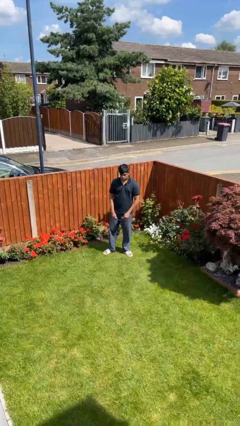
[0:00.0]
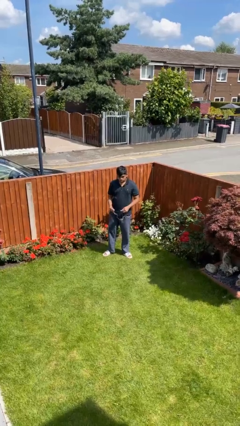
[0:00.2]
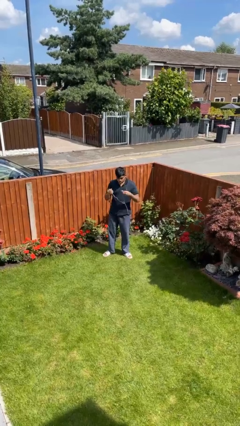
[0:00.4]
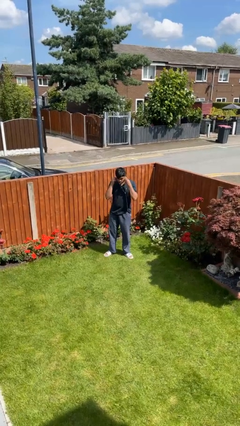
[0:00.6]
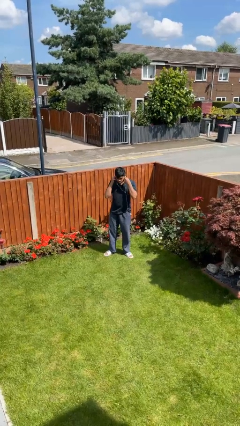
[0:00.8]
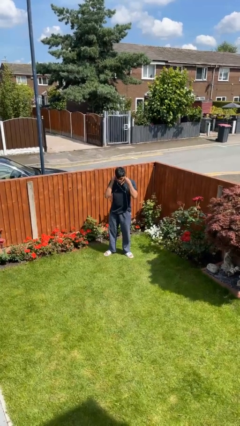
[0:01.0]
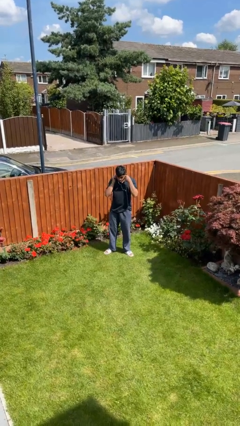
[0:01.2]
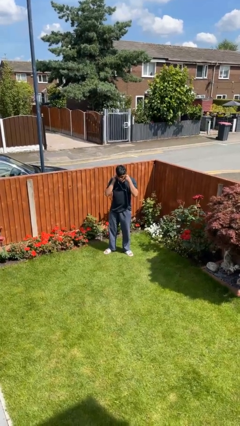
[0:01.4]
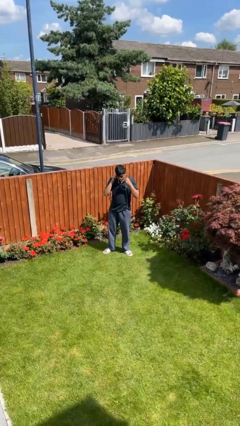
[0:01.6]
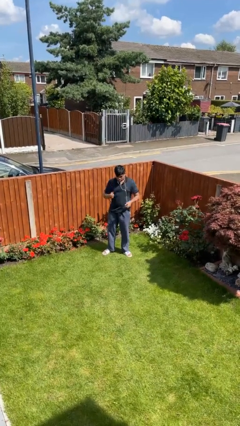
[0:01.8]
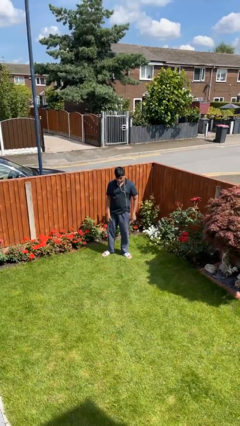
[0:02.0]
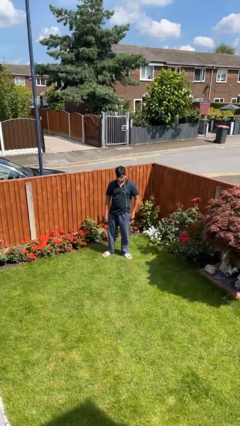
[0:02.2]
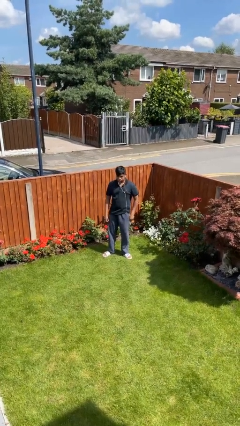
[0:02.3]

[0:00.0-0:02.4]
person puts on headphones

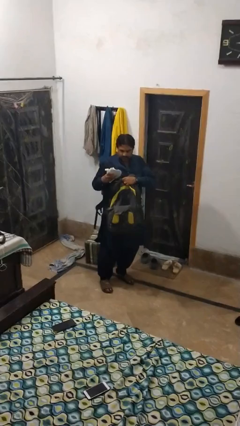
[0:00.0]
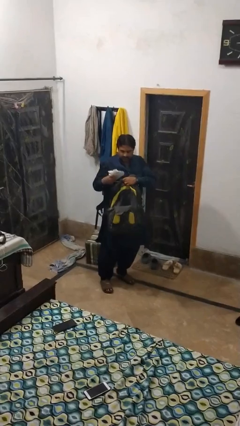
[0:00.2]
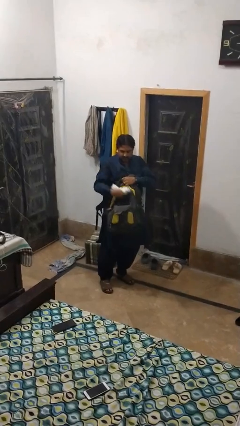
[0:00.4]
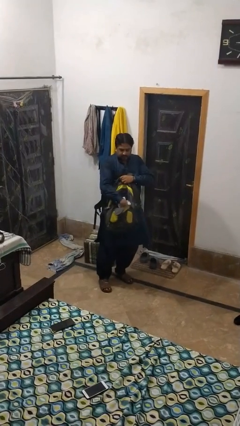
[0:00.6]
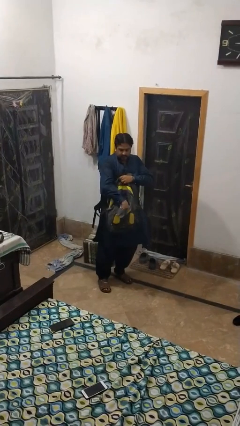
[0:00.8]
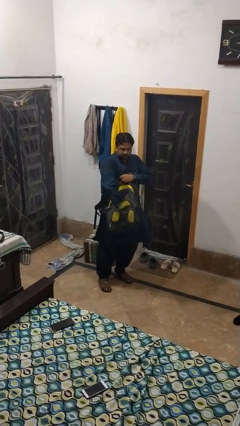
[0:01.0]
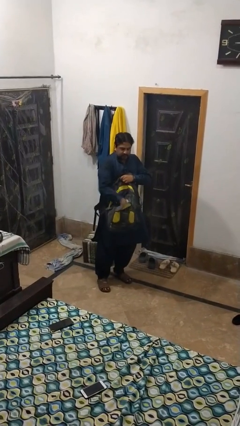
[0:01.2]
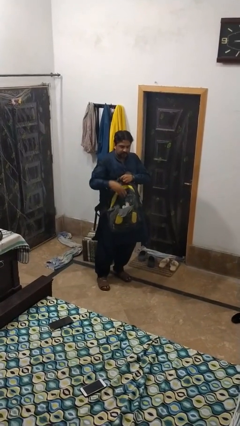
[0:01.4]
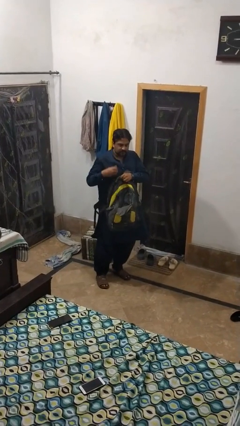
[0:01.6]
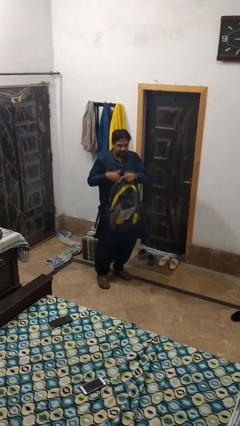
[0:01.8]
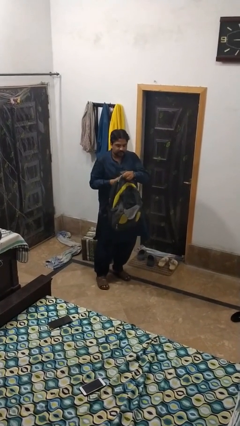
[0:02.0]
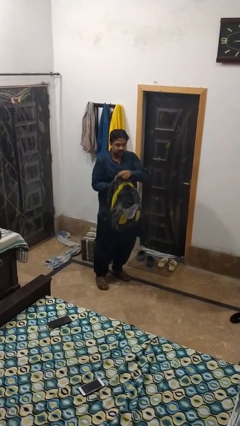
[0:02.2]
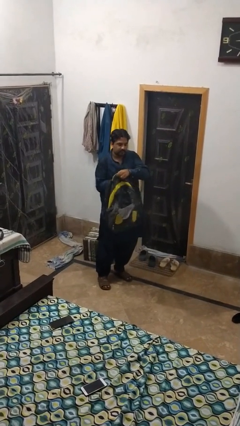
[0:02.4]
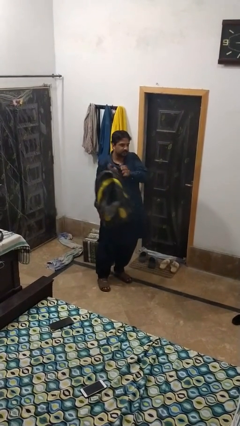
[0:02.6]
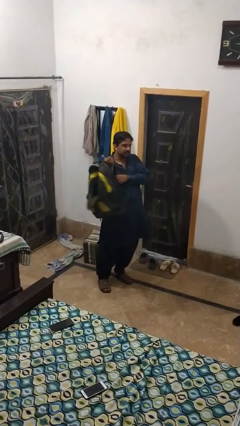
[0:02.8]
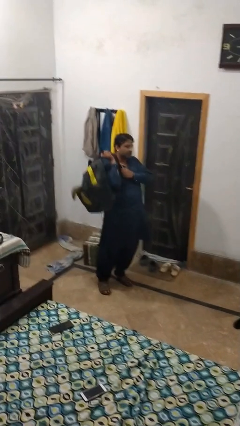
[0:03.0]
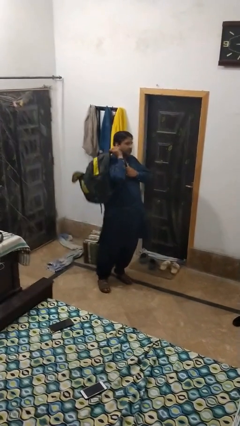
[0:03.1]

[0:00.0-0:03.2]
person puts object into backpack

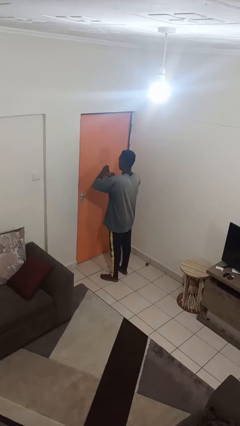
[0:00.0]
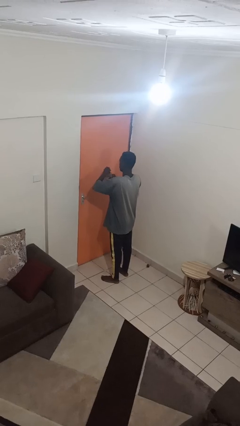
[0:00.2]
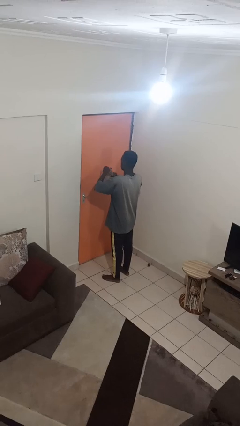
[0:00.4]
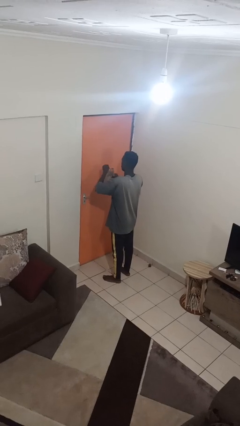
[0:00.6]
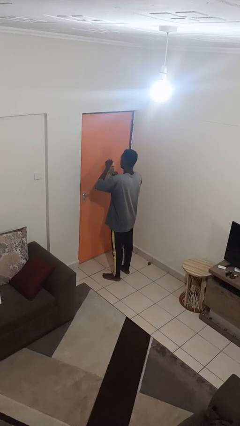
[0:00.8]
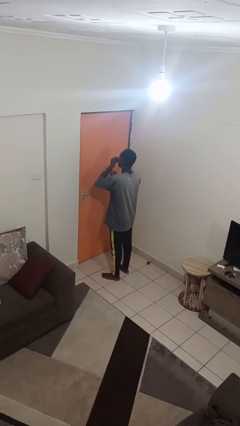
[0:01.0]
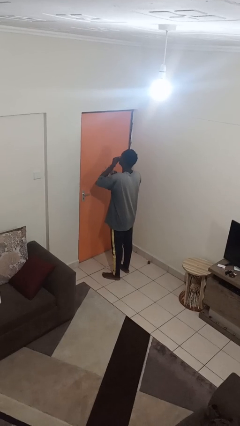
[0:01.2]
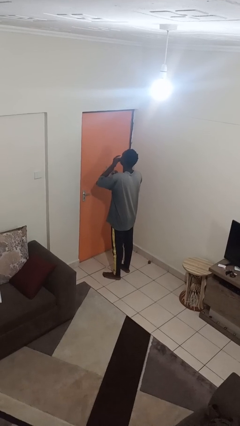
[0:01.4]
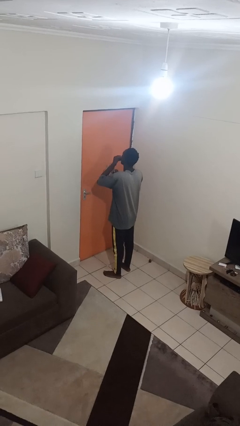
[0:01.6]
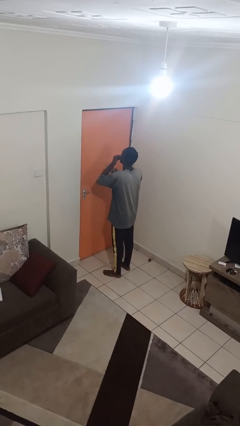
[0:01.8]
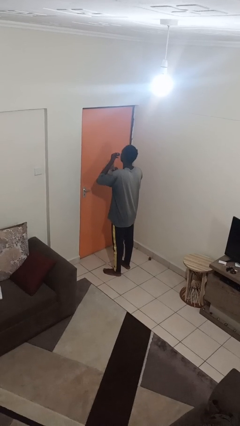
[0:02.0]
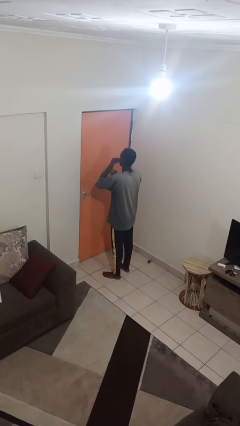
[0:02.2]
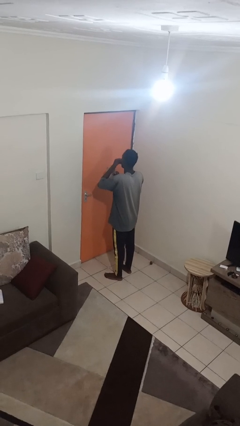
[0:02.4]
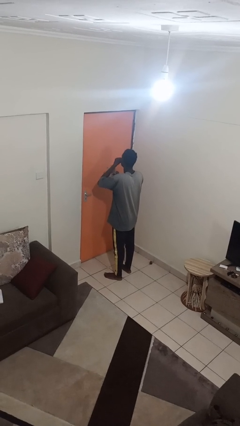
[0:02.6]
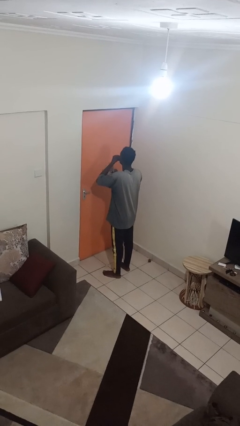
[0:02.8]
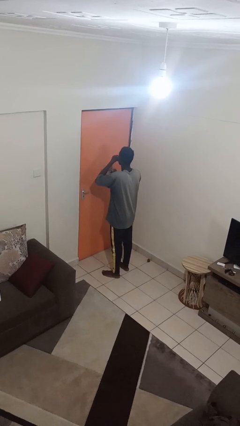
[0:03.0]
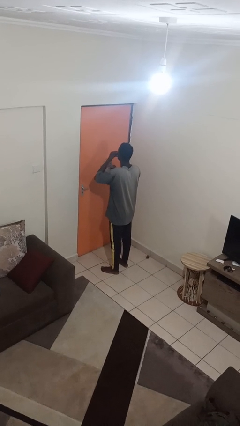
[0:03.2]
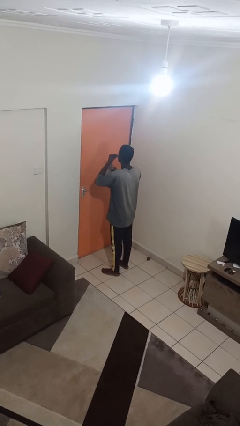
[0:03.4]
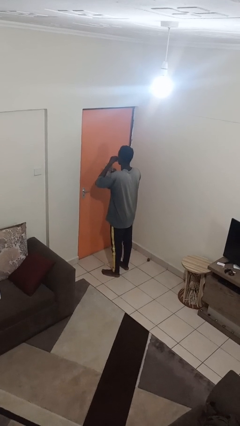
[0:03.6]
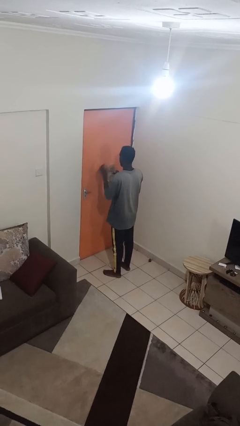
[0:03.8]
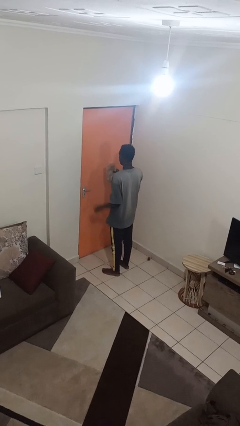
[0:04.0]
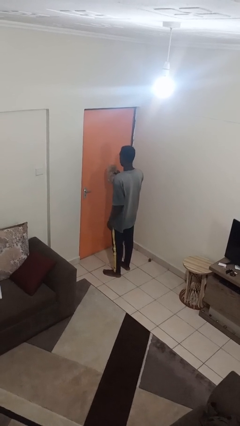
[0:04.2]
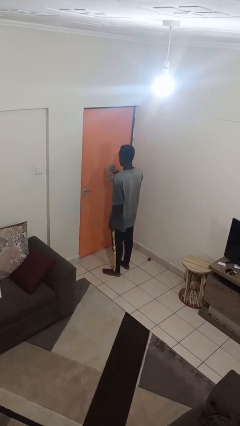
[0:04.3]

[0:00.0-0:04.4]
person eats snack from bag

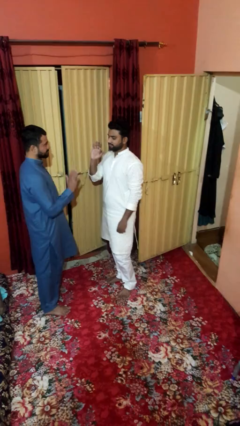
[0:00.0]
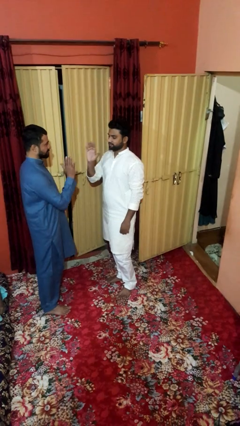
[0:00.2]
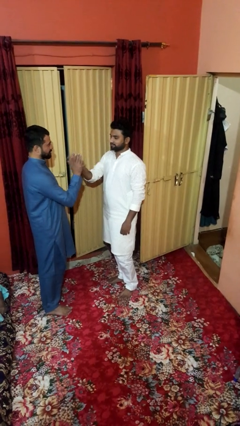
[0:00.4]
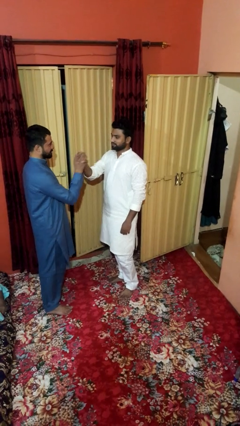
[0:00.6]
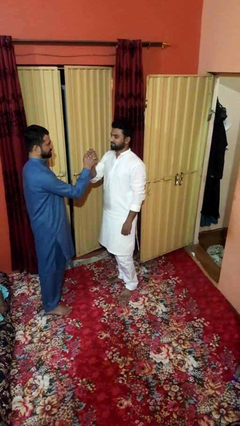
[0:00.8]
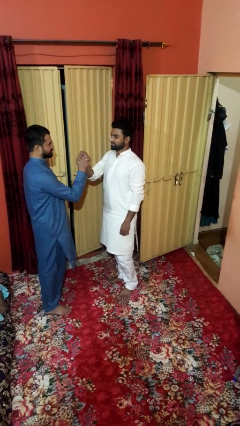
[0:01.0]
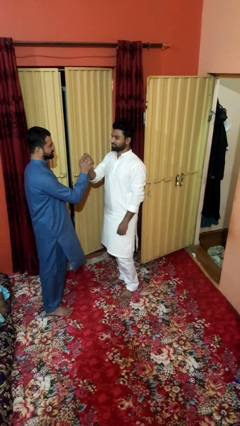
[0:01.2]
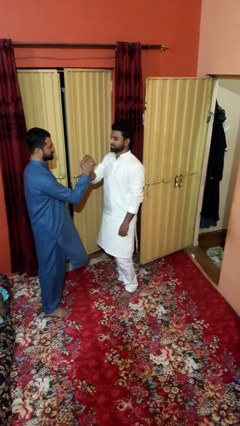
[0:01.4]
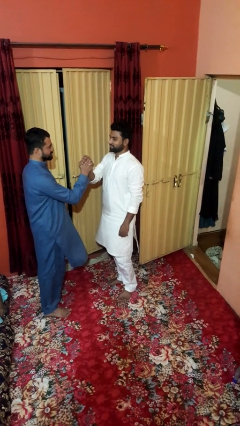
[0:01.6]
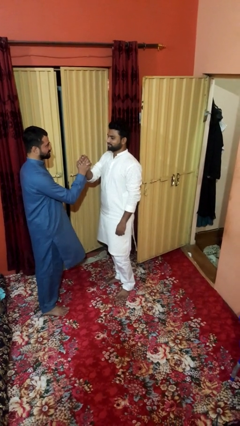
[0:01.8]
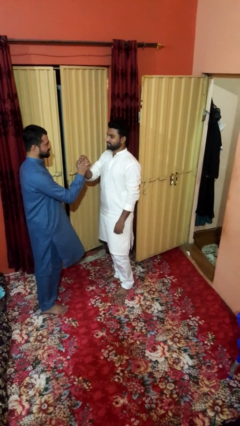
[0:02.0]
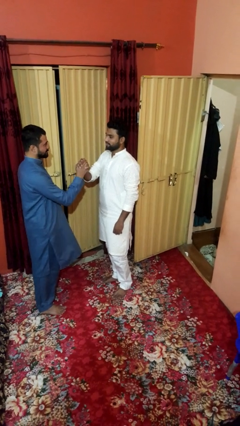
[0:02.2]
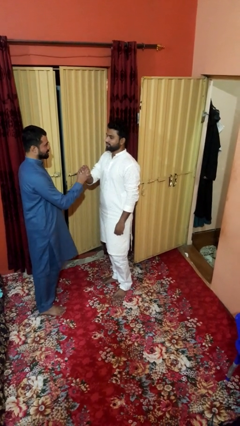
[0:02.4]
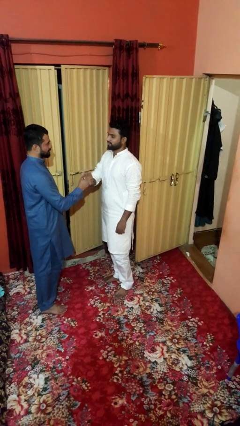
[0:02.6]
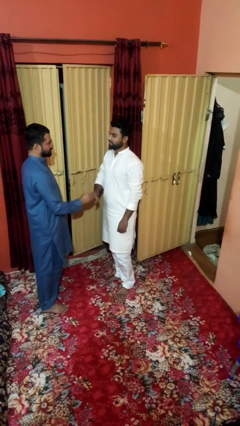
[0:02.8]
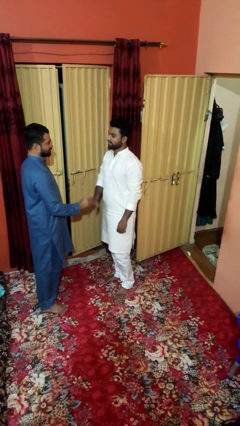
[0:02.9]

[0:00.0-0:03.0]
person highfives hand

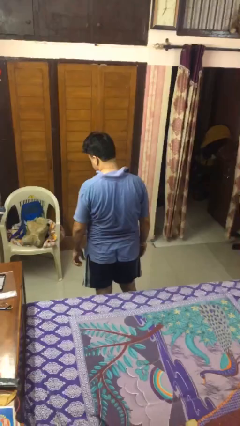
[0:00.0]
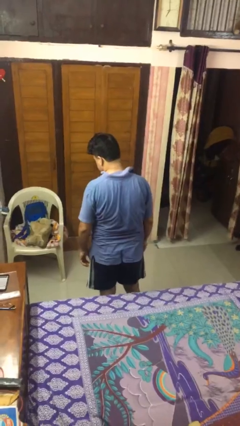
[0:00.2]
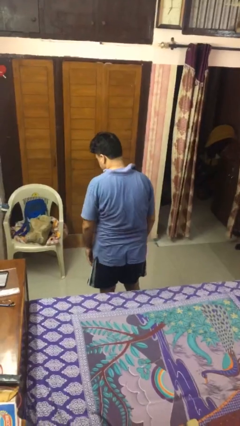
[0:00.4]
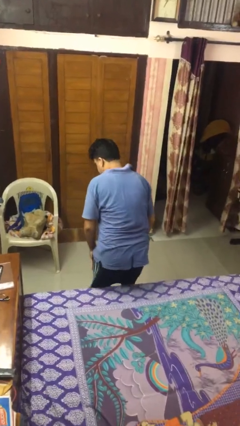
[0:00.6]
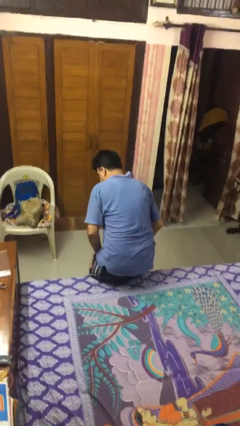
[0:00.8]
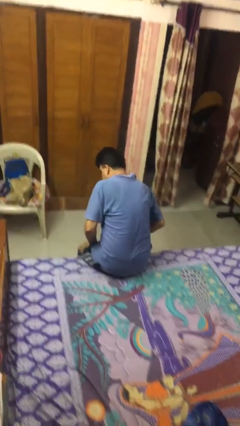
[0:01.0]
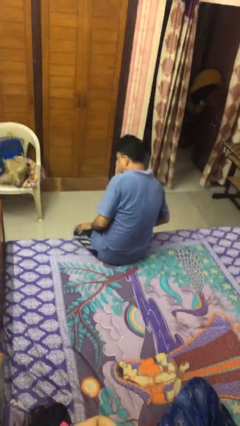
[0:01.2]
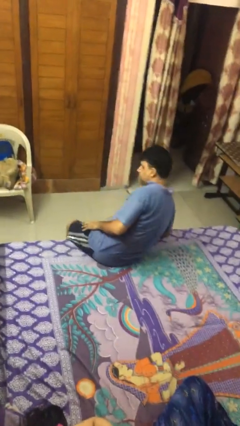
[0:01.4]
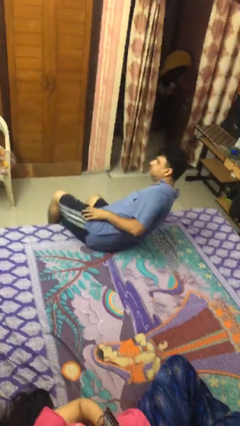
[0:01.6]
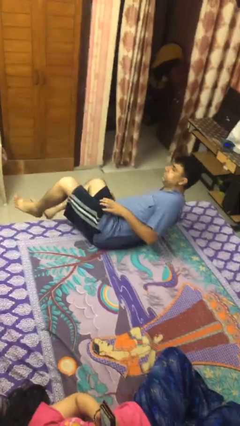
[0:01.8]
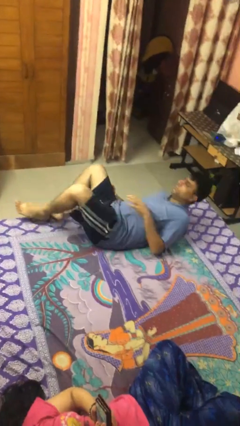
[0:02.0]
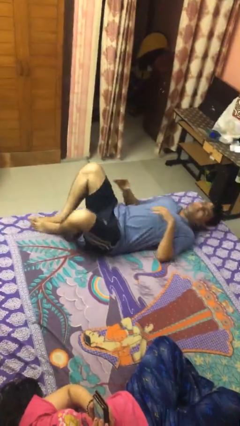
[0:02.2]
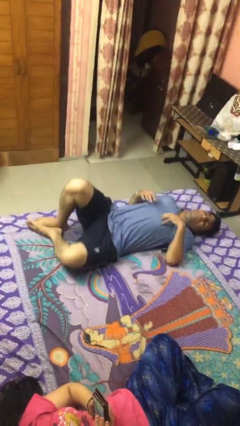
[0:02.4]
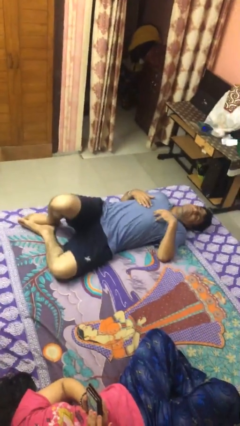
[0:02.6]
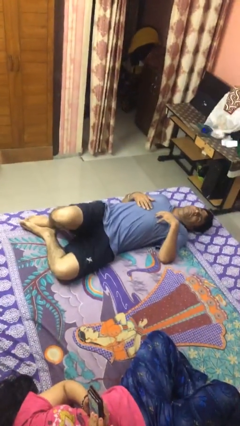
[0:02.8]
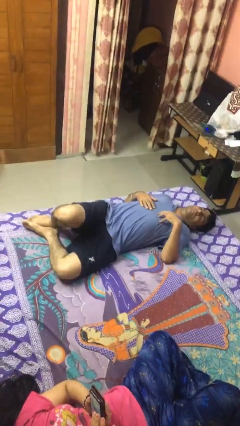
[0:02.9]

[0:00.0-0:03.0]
person lies down on bed

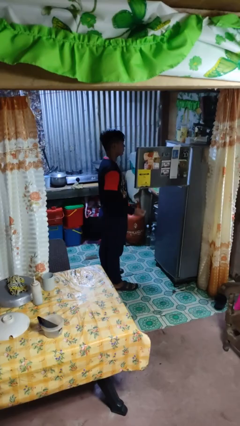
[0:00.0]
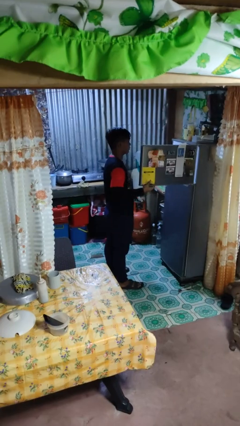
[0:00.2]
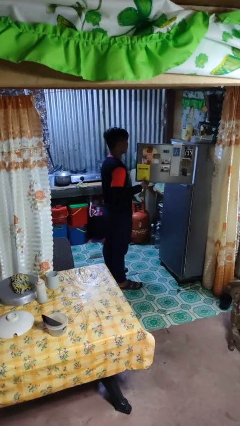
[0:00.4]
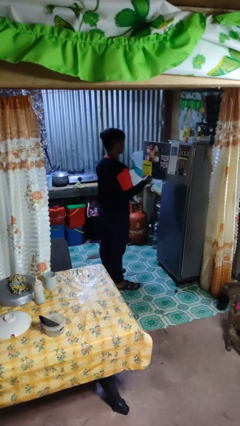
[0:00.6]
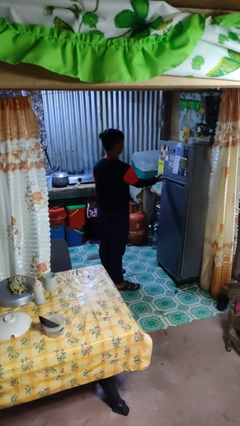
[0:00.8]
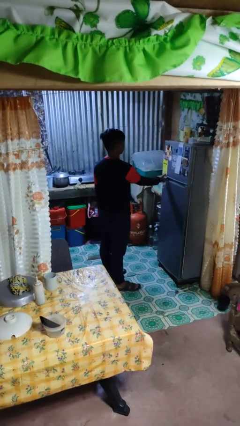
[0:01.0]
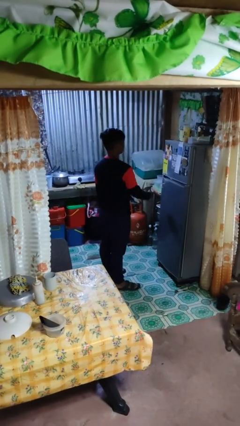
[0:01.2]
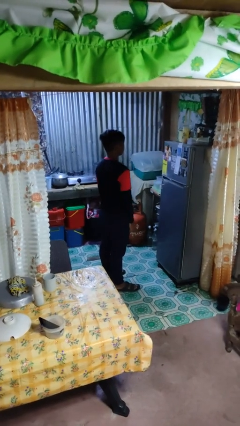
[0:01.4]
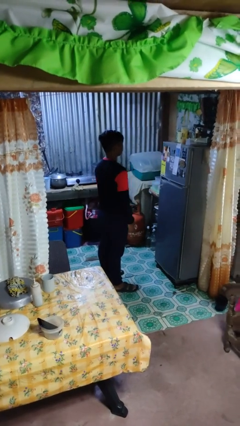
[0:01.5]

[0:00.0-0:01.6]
person closes refrigerator
